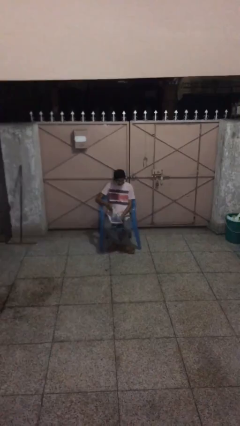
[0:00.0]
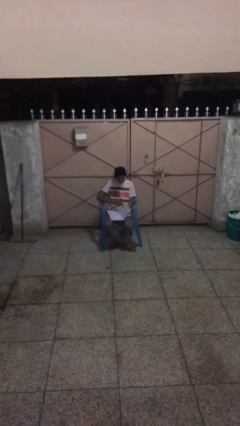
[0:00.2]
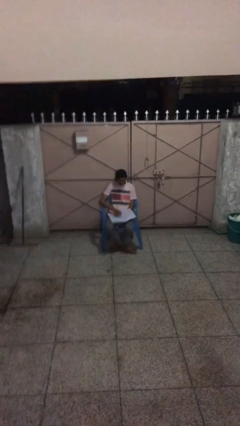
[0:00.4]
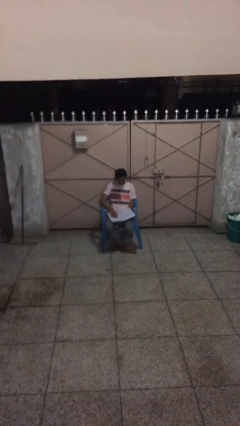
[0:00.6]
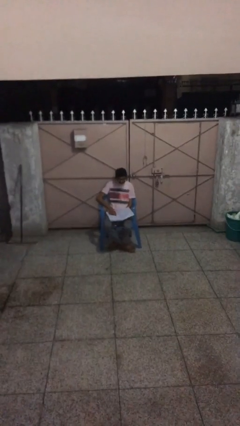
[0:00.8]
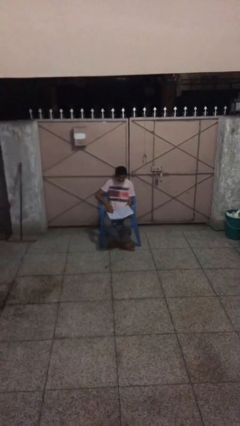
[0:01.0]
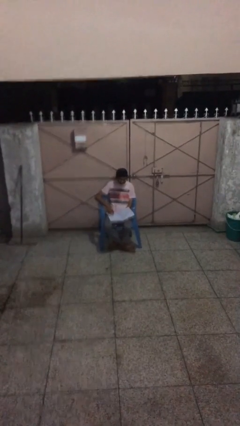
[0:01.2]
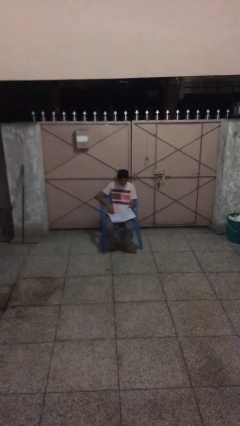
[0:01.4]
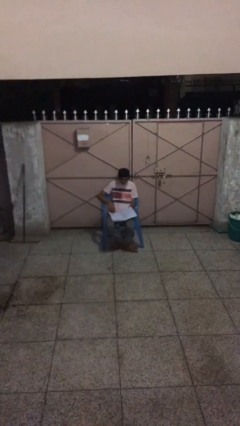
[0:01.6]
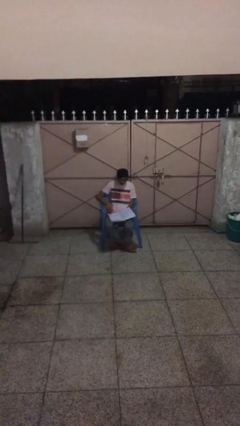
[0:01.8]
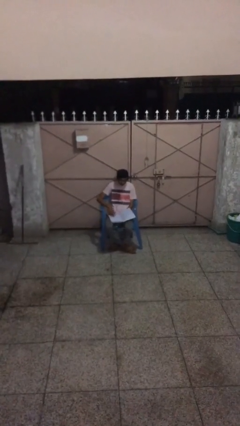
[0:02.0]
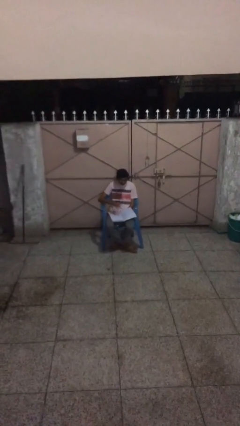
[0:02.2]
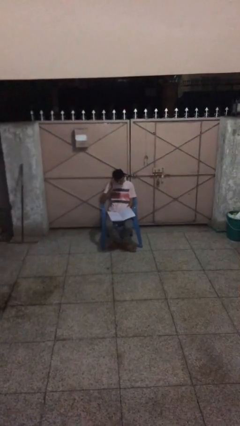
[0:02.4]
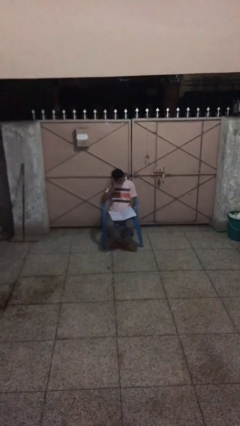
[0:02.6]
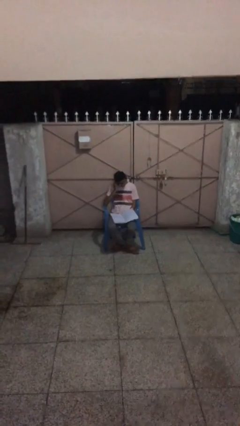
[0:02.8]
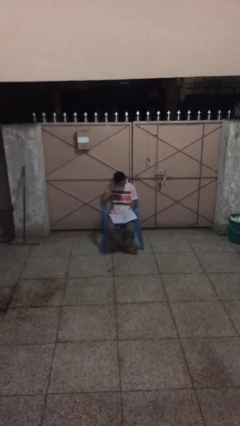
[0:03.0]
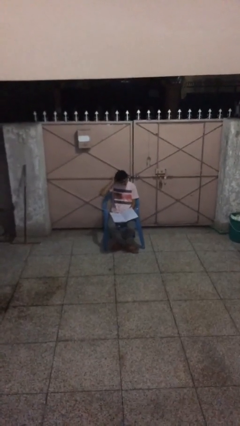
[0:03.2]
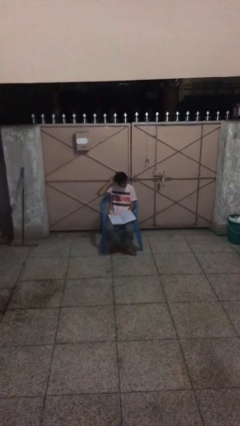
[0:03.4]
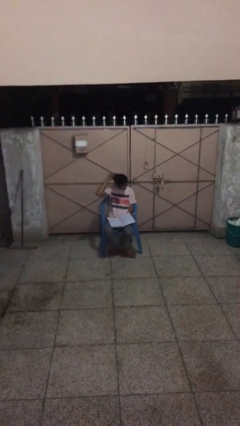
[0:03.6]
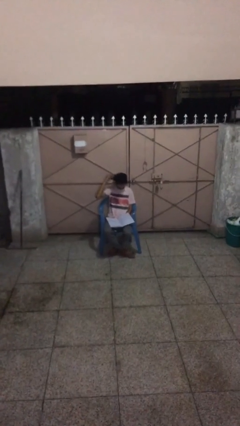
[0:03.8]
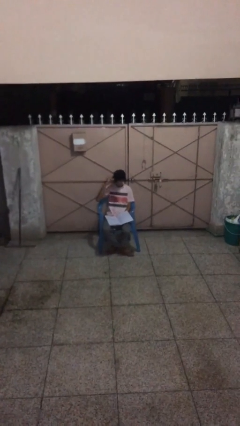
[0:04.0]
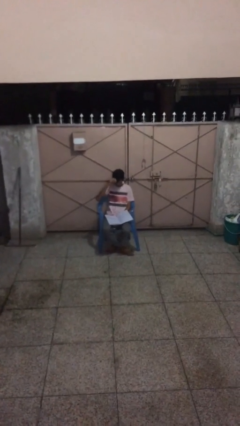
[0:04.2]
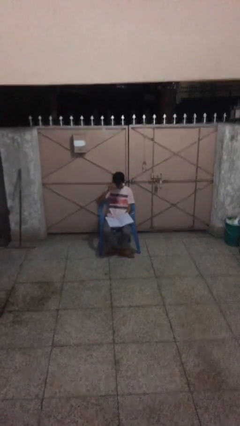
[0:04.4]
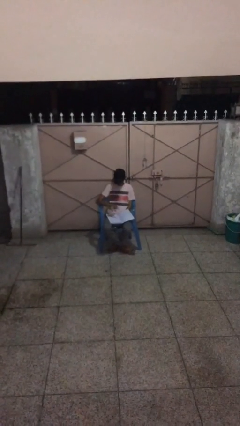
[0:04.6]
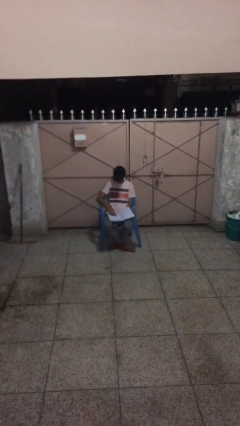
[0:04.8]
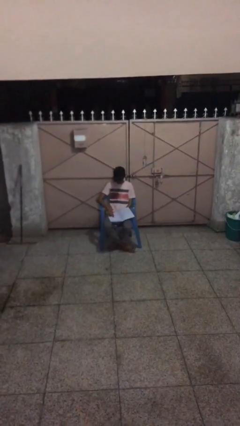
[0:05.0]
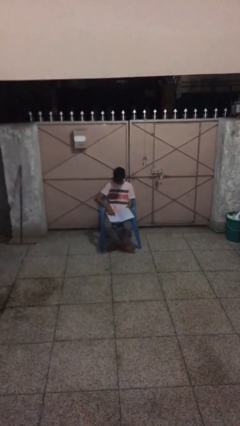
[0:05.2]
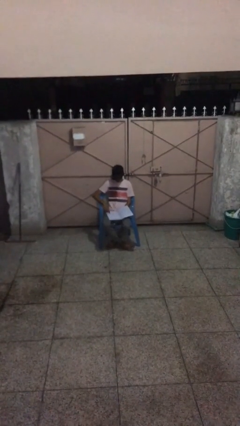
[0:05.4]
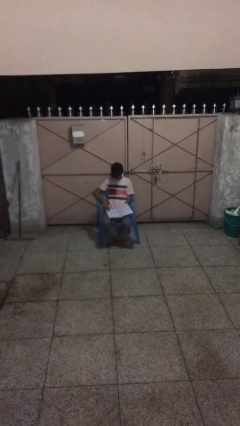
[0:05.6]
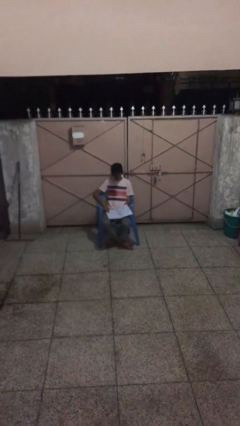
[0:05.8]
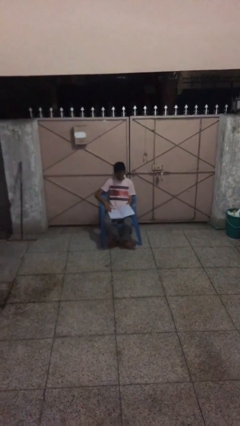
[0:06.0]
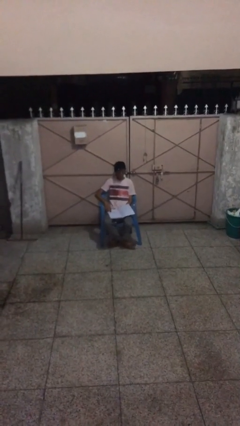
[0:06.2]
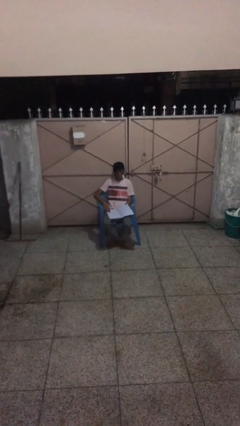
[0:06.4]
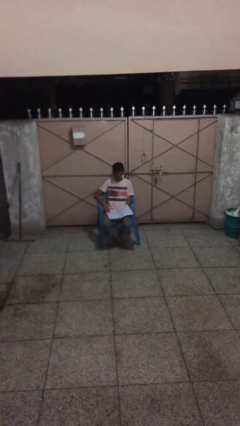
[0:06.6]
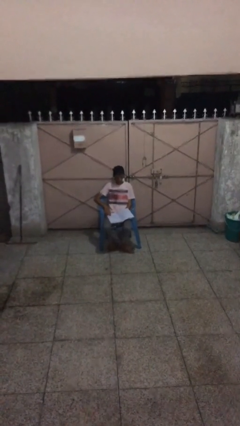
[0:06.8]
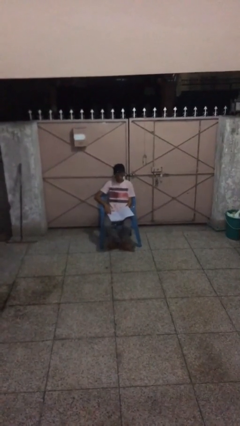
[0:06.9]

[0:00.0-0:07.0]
person reads document

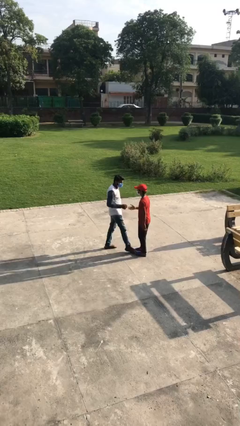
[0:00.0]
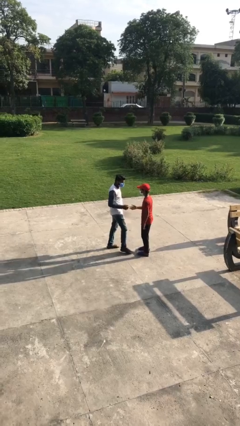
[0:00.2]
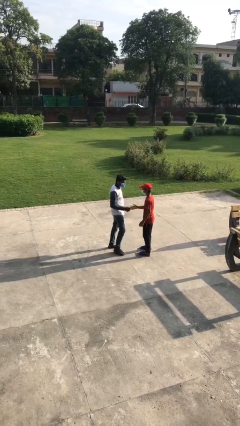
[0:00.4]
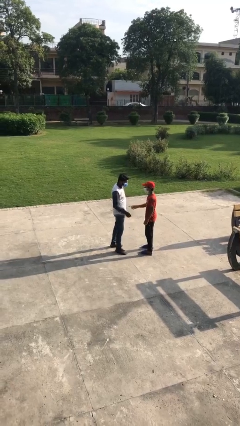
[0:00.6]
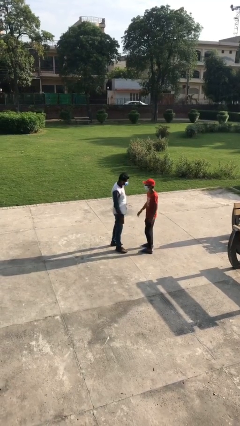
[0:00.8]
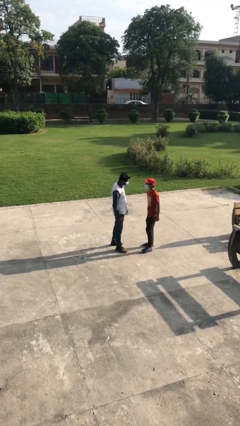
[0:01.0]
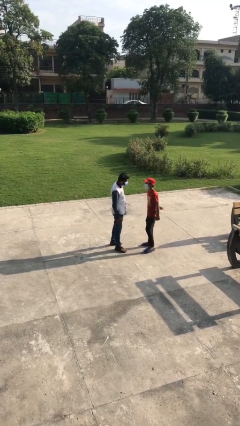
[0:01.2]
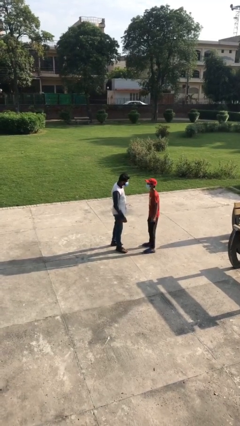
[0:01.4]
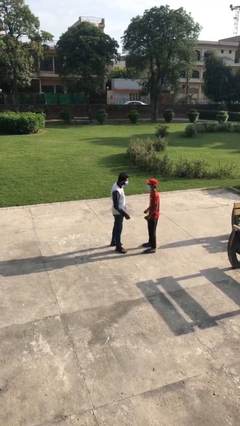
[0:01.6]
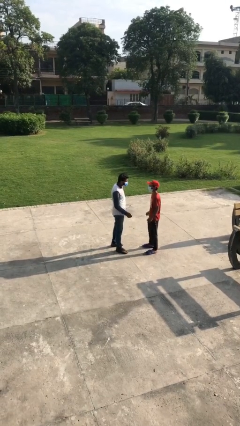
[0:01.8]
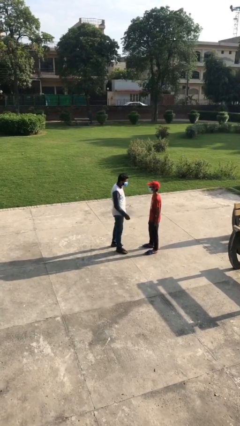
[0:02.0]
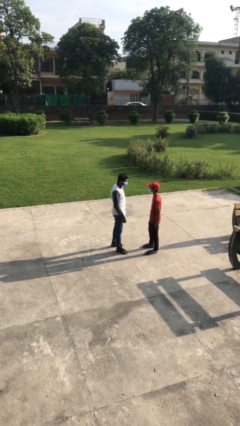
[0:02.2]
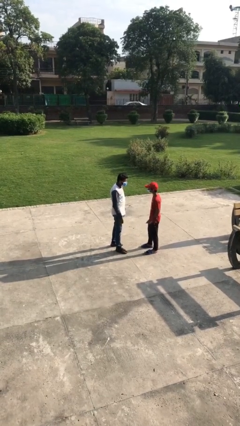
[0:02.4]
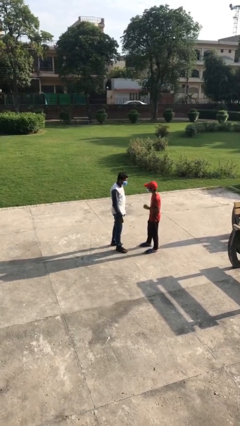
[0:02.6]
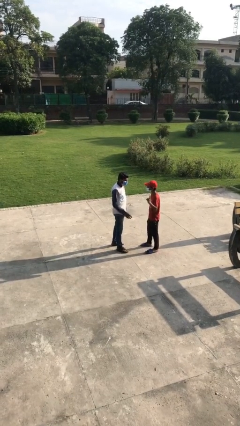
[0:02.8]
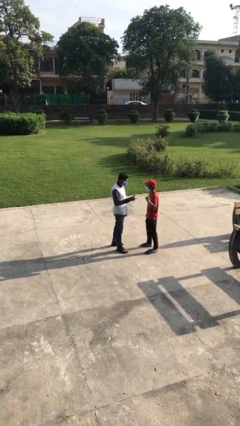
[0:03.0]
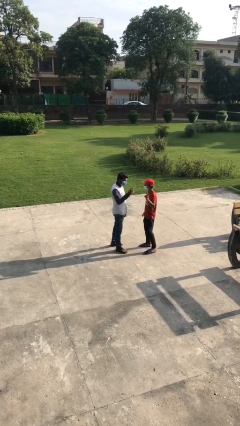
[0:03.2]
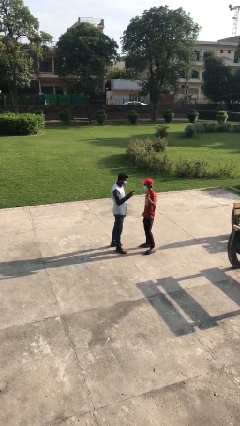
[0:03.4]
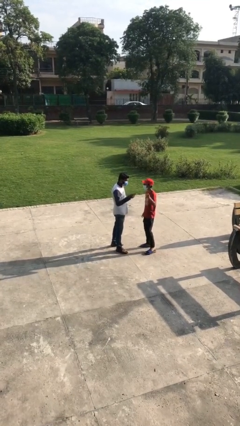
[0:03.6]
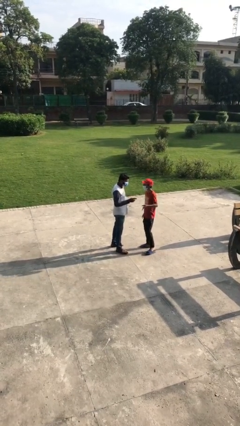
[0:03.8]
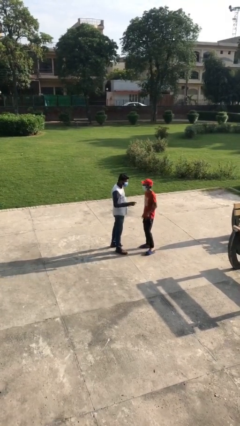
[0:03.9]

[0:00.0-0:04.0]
person talks to person

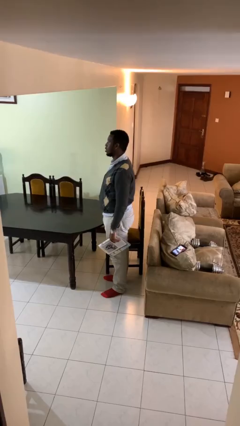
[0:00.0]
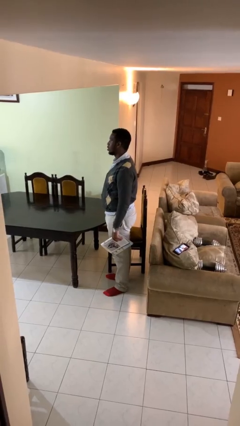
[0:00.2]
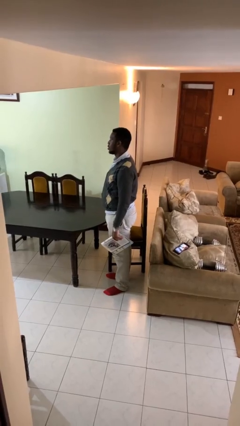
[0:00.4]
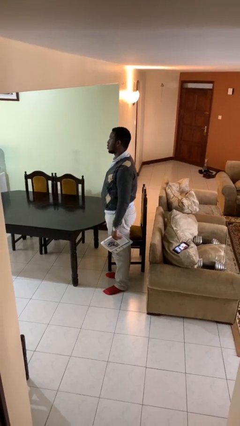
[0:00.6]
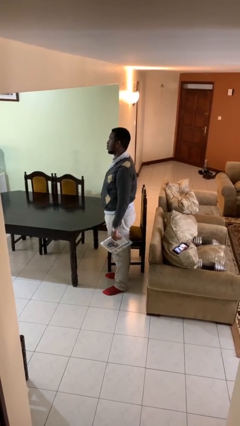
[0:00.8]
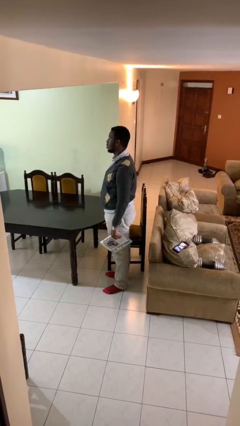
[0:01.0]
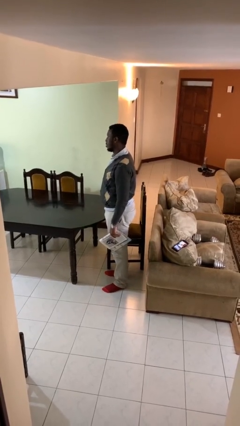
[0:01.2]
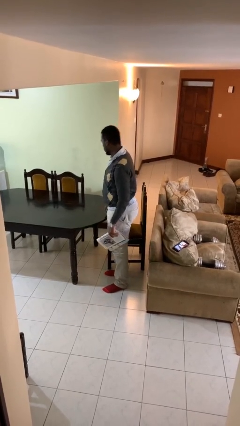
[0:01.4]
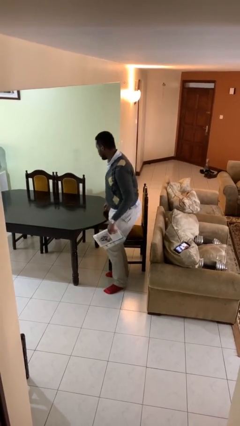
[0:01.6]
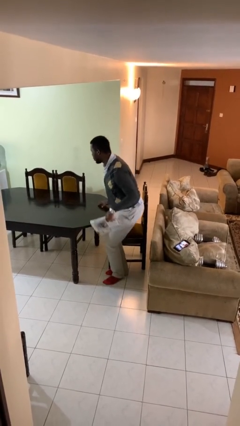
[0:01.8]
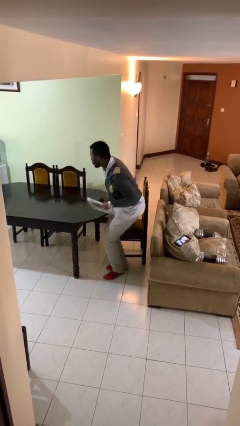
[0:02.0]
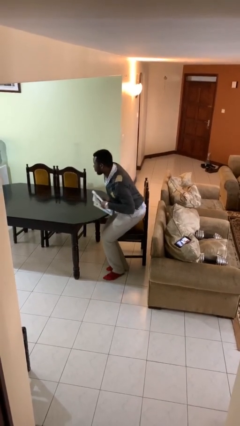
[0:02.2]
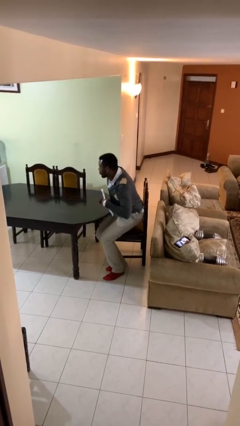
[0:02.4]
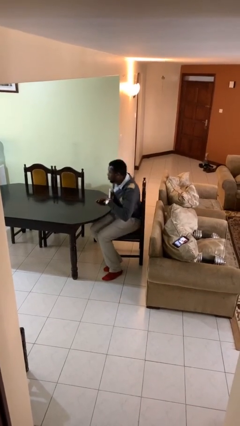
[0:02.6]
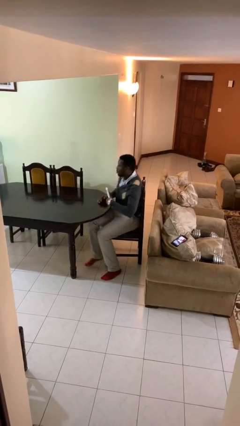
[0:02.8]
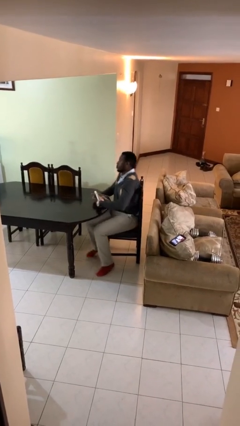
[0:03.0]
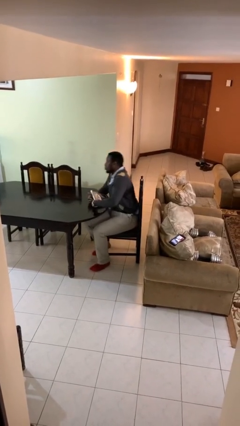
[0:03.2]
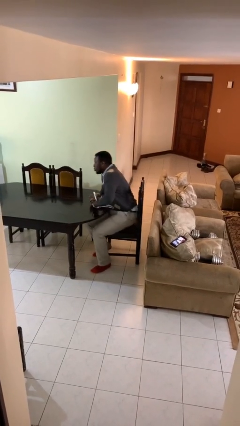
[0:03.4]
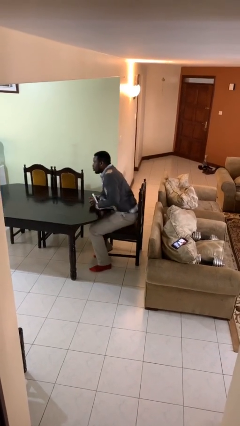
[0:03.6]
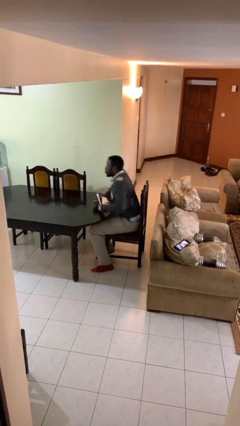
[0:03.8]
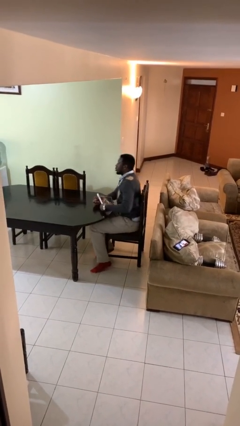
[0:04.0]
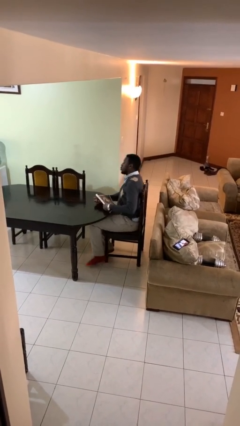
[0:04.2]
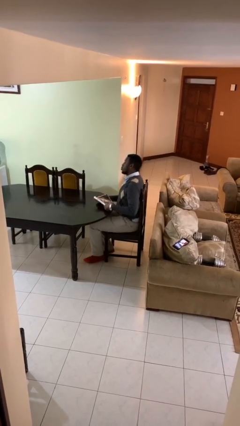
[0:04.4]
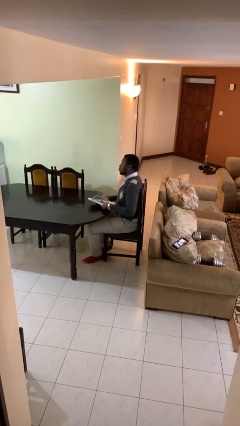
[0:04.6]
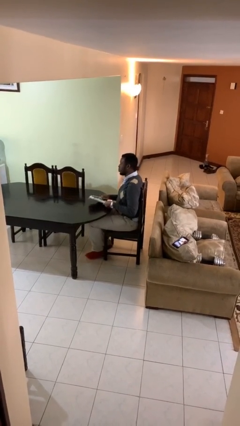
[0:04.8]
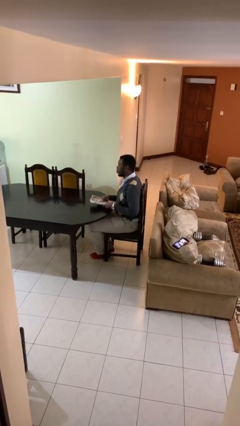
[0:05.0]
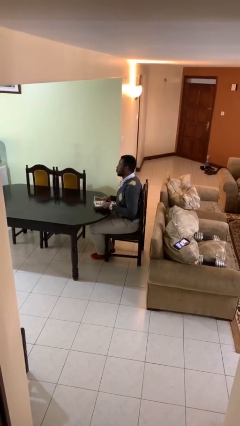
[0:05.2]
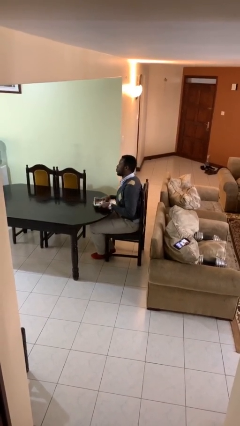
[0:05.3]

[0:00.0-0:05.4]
person sits down

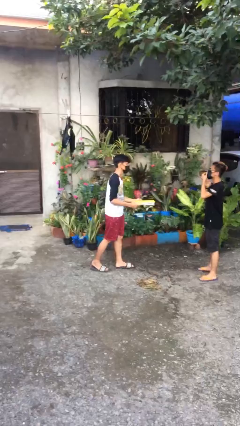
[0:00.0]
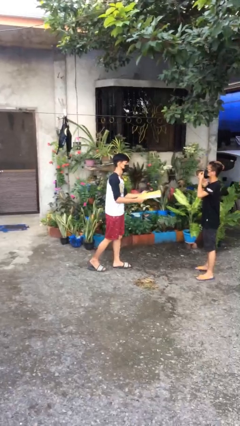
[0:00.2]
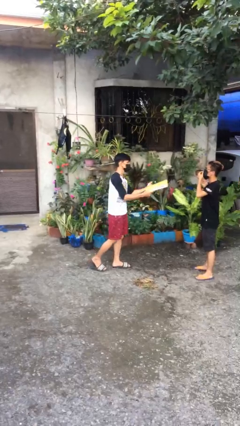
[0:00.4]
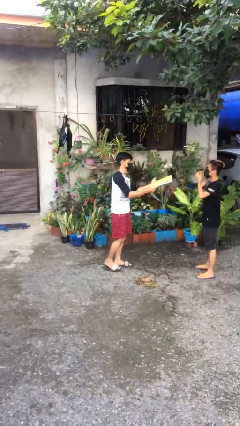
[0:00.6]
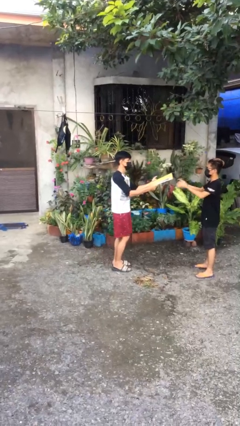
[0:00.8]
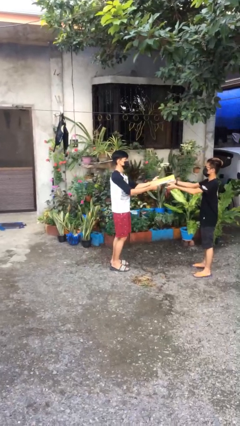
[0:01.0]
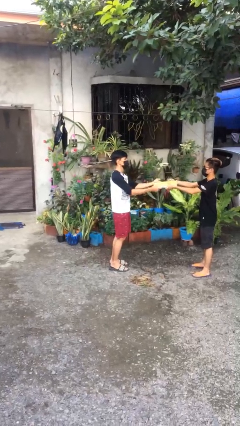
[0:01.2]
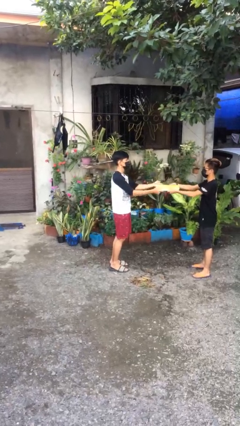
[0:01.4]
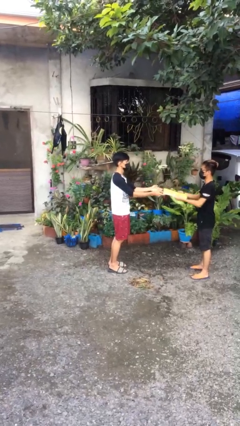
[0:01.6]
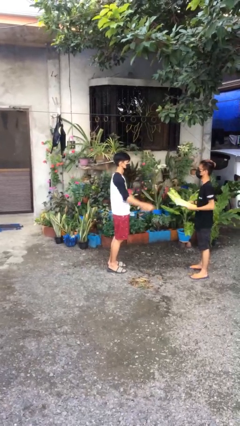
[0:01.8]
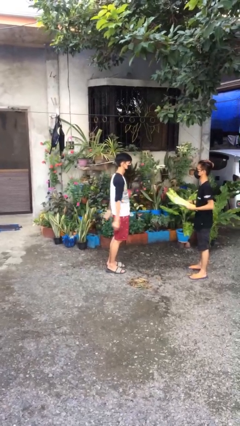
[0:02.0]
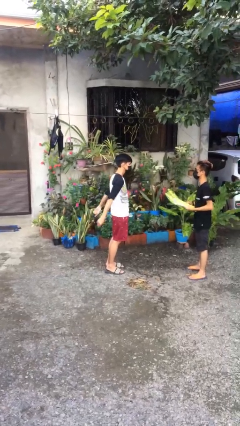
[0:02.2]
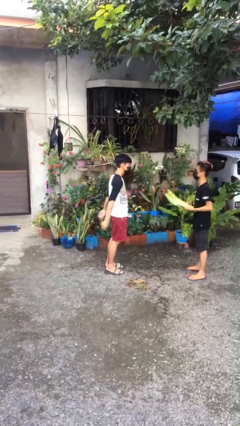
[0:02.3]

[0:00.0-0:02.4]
person transfers object to person
